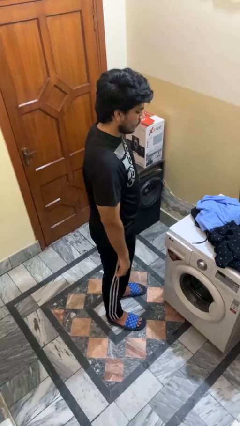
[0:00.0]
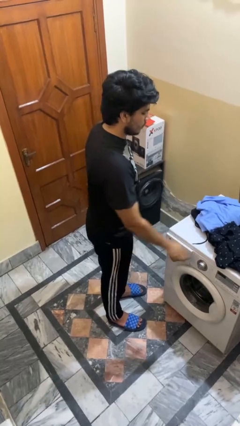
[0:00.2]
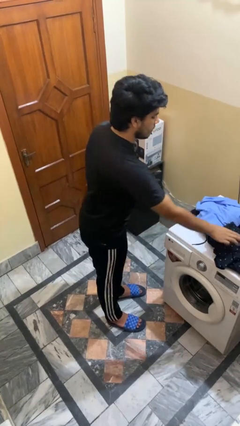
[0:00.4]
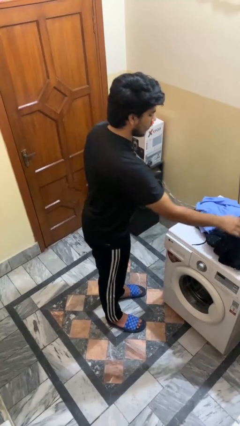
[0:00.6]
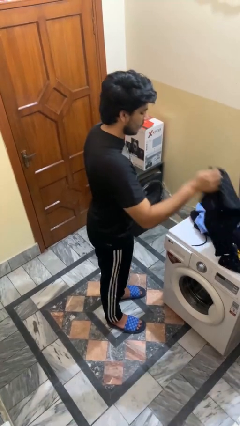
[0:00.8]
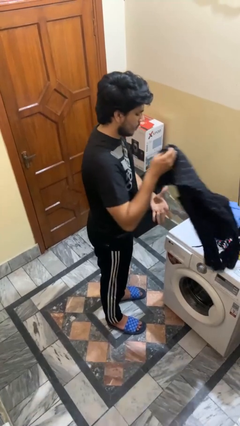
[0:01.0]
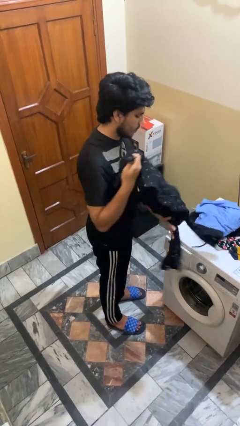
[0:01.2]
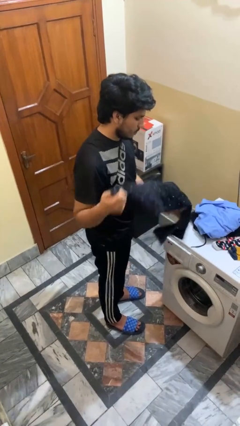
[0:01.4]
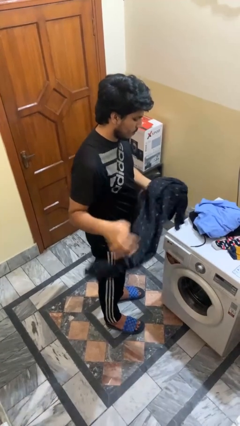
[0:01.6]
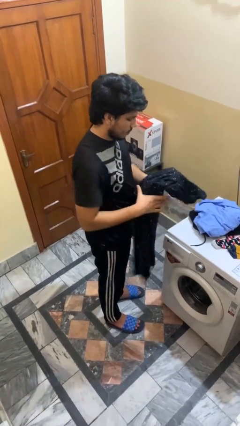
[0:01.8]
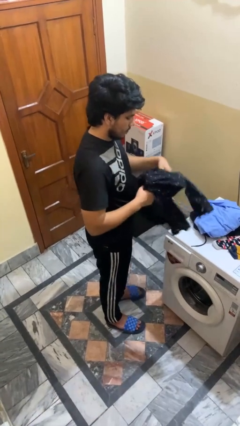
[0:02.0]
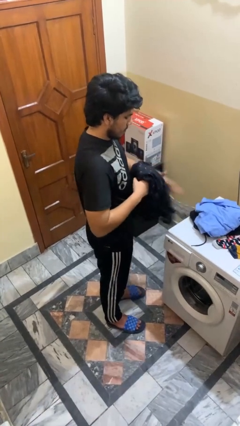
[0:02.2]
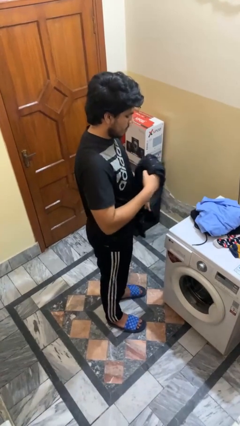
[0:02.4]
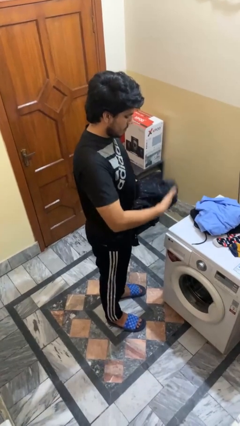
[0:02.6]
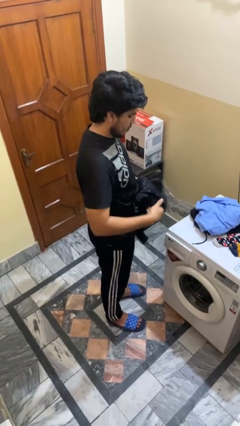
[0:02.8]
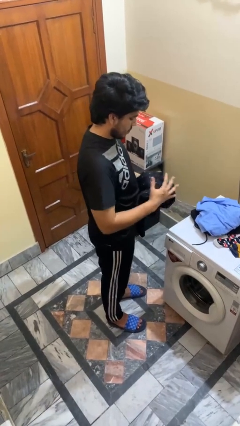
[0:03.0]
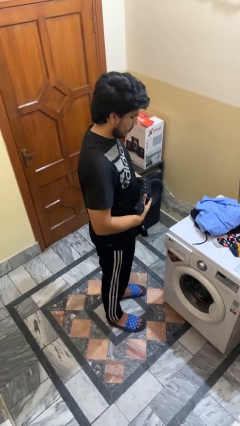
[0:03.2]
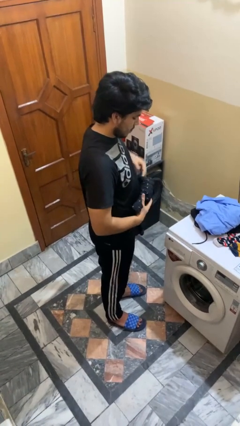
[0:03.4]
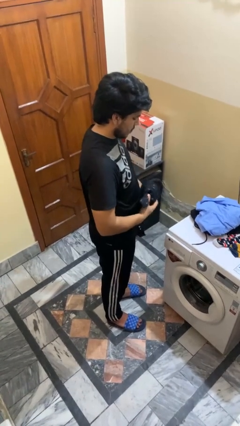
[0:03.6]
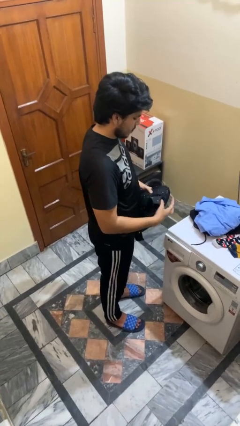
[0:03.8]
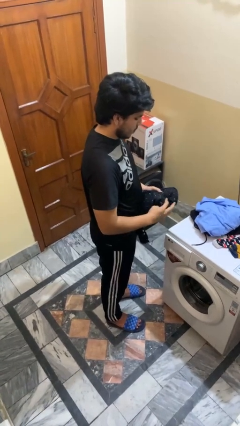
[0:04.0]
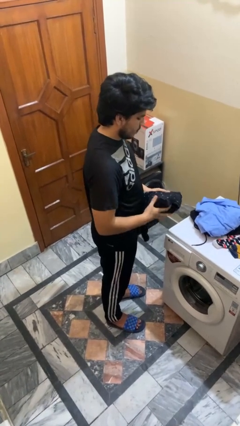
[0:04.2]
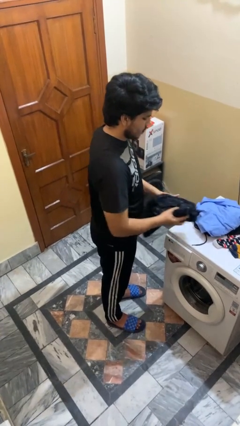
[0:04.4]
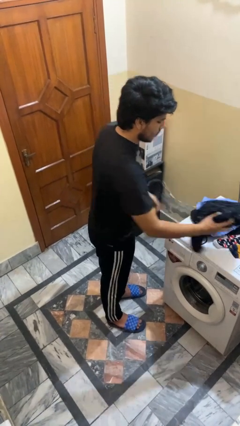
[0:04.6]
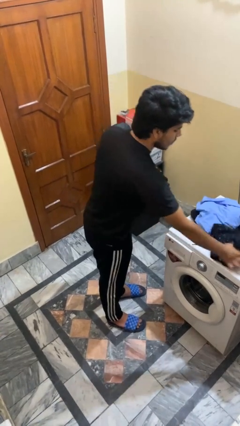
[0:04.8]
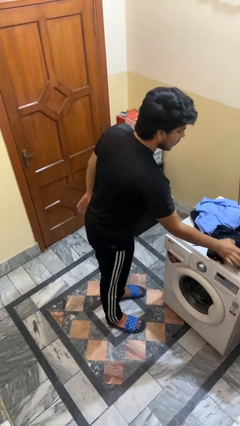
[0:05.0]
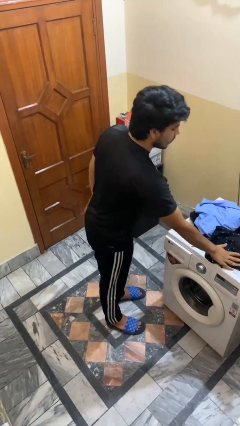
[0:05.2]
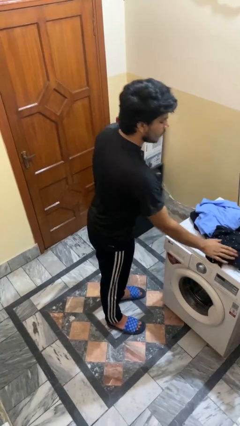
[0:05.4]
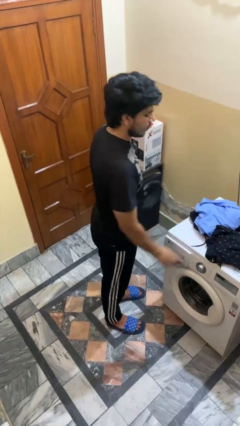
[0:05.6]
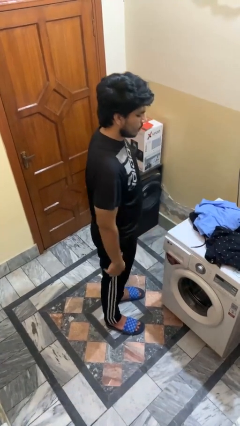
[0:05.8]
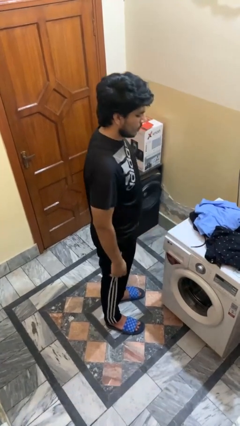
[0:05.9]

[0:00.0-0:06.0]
person folds shirt

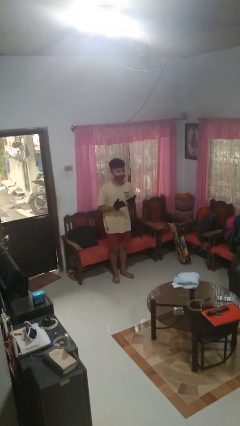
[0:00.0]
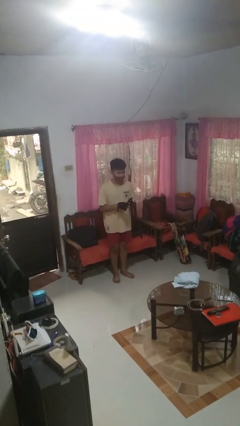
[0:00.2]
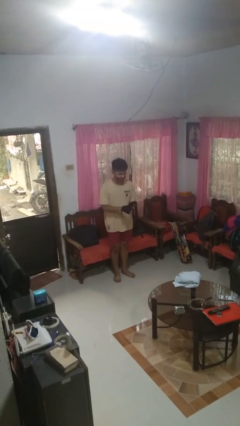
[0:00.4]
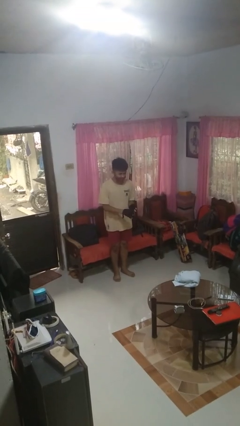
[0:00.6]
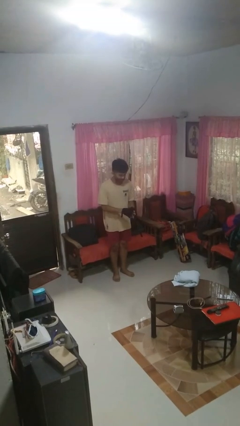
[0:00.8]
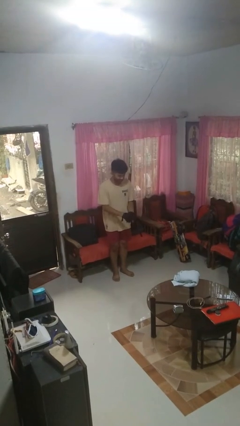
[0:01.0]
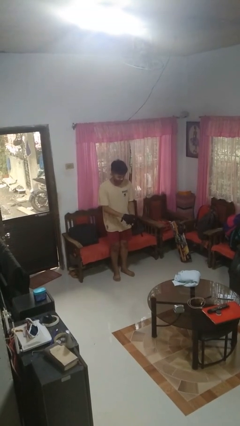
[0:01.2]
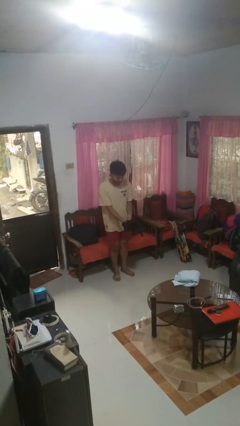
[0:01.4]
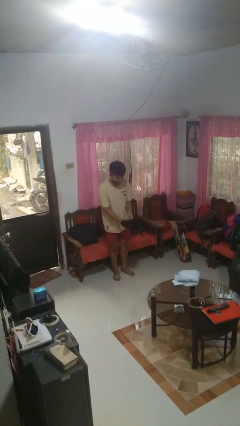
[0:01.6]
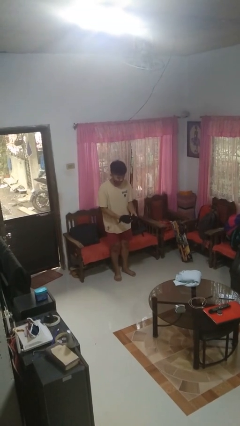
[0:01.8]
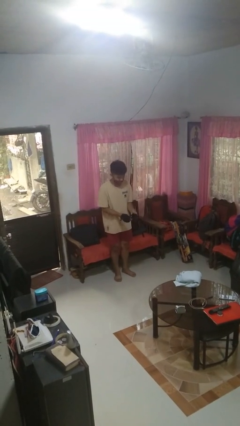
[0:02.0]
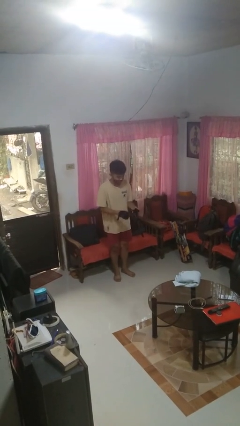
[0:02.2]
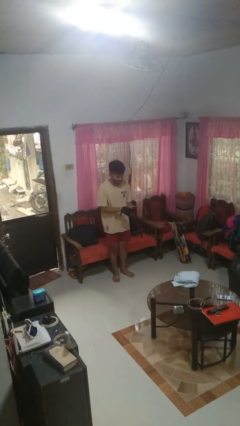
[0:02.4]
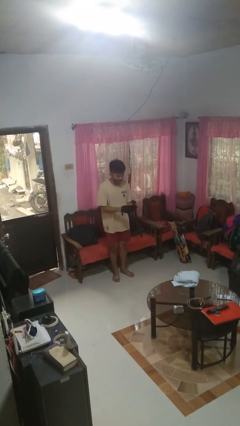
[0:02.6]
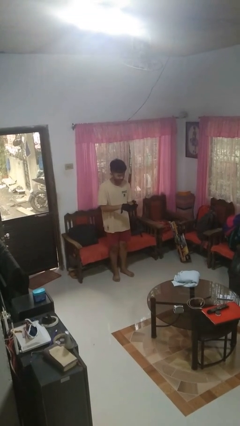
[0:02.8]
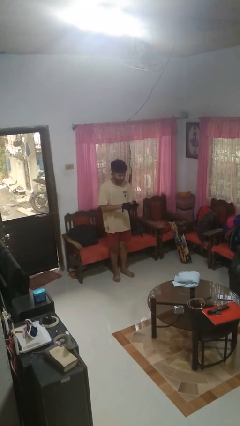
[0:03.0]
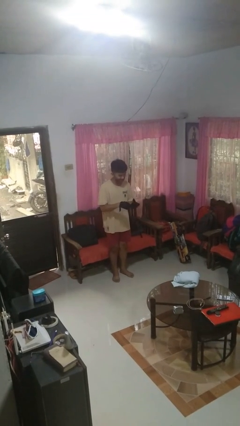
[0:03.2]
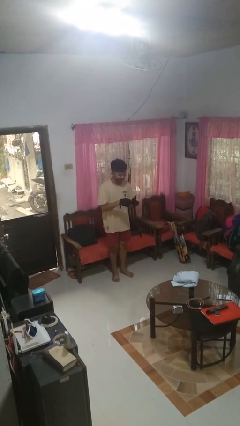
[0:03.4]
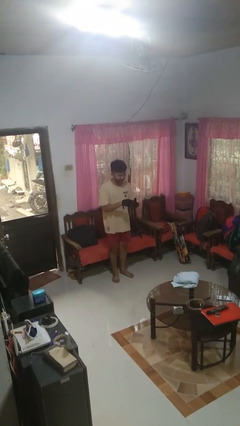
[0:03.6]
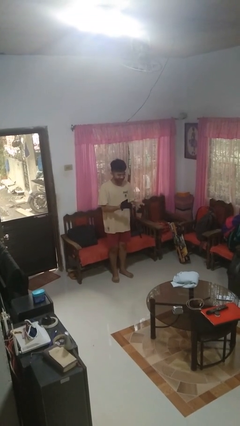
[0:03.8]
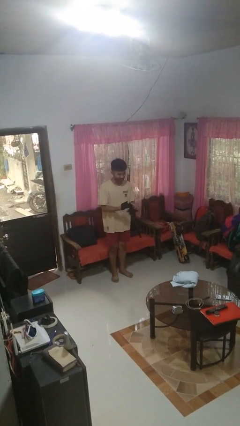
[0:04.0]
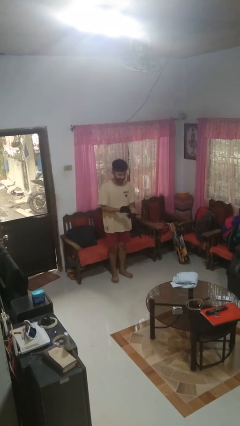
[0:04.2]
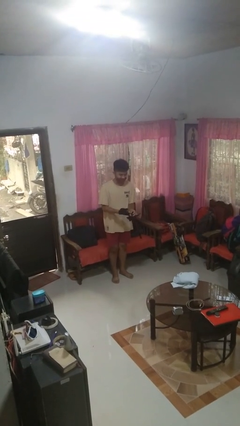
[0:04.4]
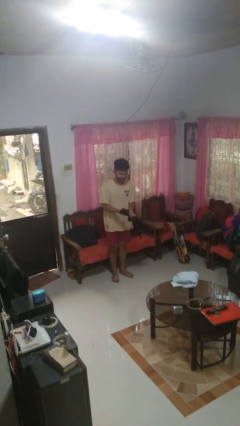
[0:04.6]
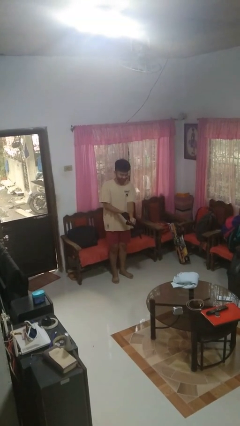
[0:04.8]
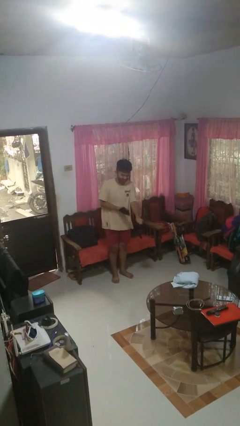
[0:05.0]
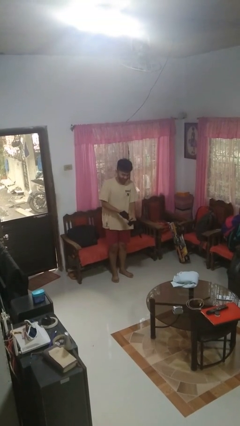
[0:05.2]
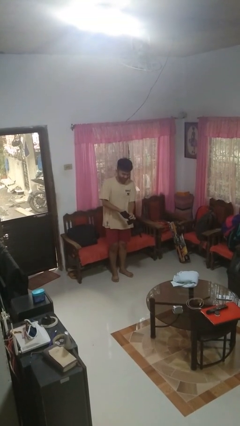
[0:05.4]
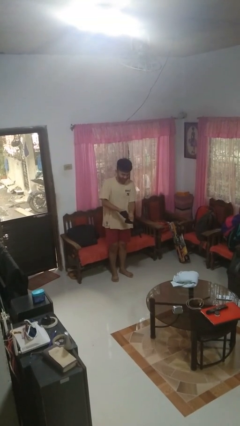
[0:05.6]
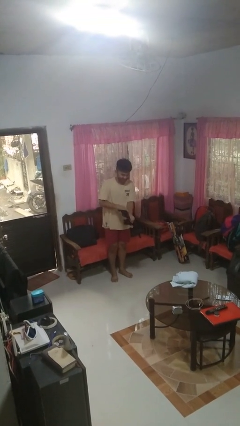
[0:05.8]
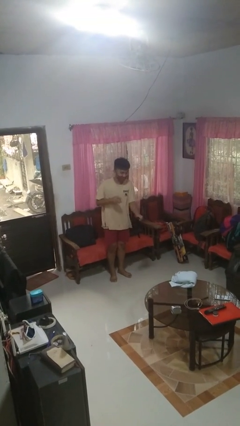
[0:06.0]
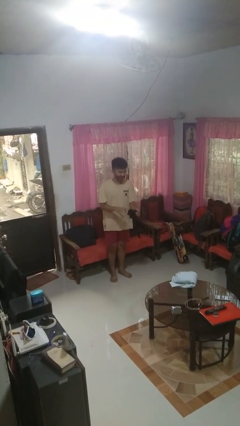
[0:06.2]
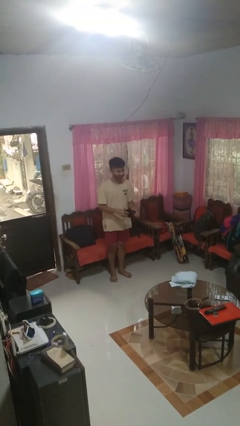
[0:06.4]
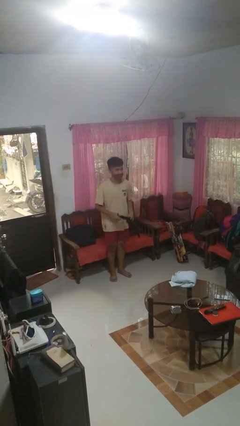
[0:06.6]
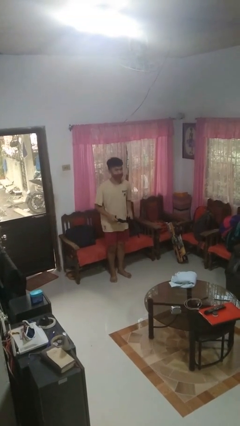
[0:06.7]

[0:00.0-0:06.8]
person takes off gloves

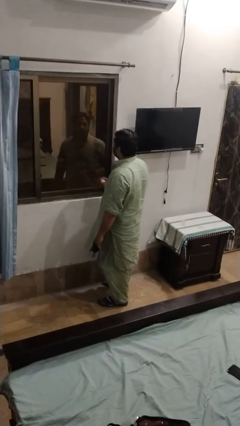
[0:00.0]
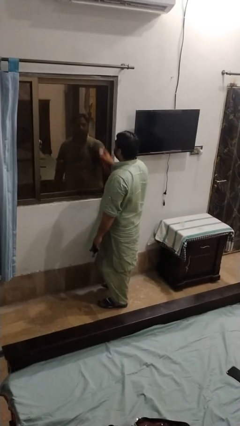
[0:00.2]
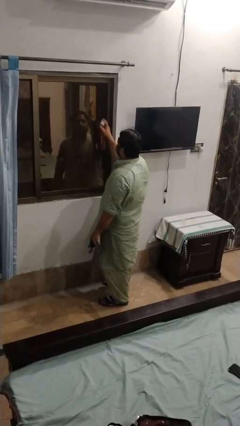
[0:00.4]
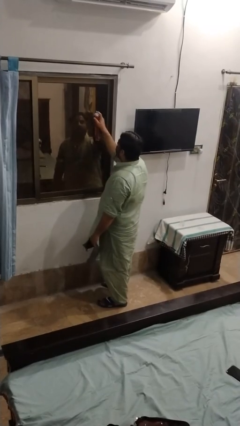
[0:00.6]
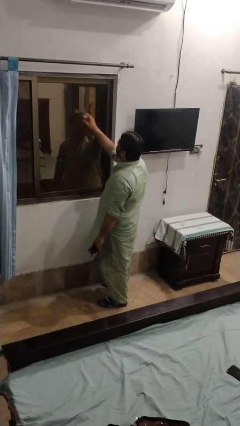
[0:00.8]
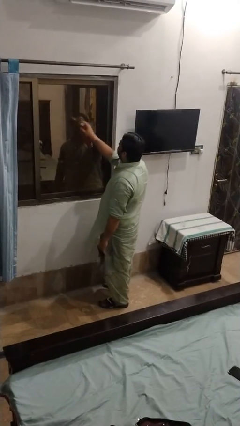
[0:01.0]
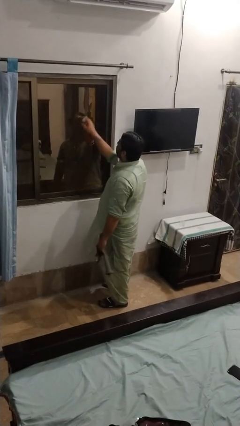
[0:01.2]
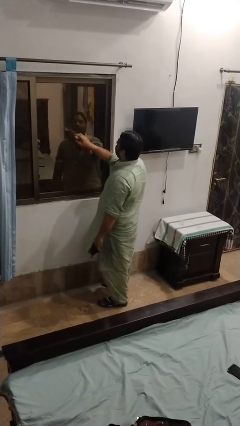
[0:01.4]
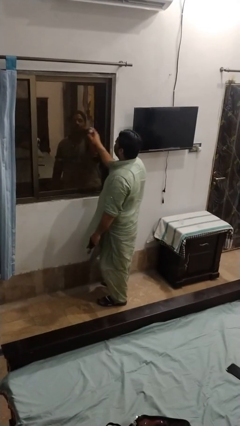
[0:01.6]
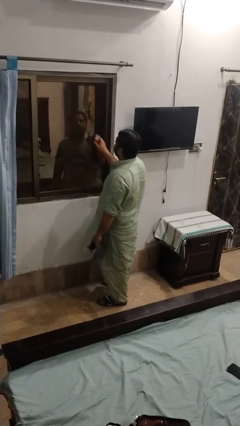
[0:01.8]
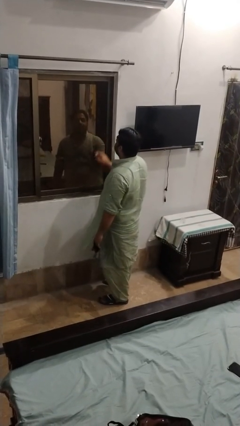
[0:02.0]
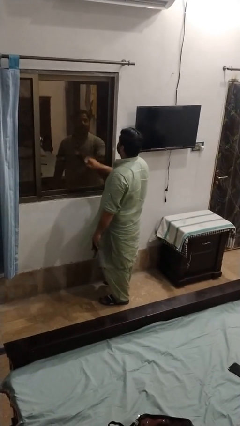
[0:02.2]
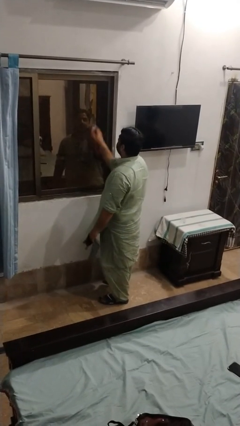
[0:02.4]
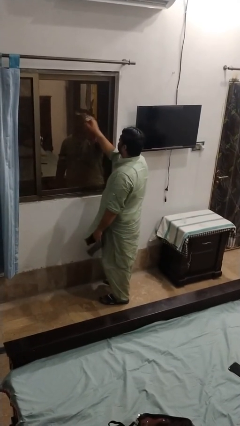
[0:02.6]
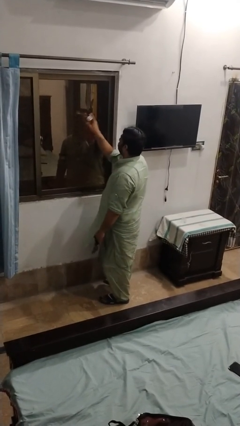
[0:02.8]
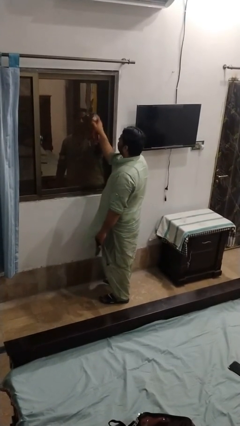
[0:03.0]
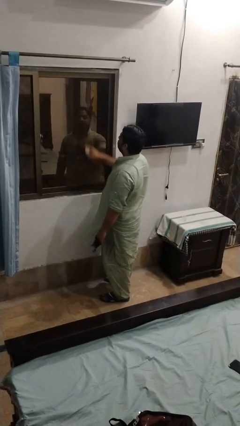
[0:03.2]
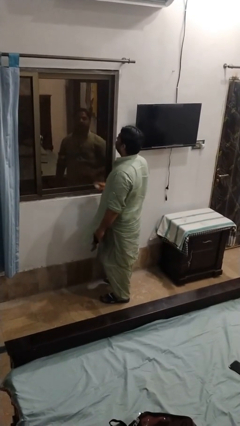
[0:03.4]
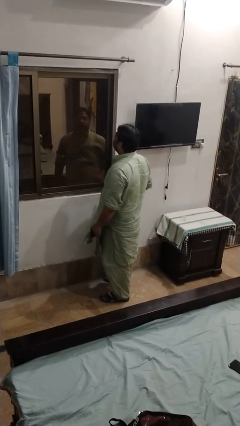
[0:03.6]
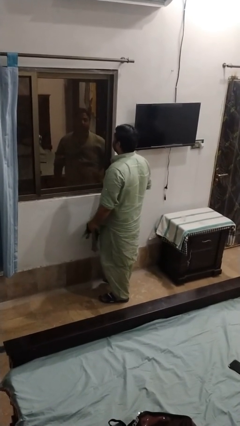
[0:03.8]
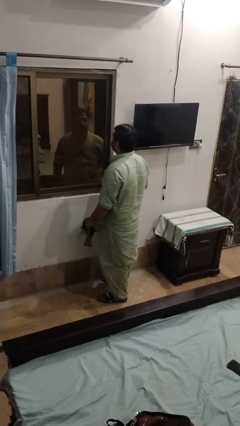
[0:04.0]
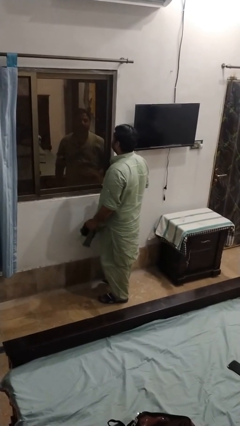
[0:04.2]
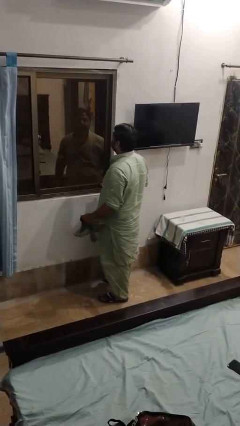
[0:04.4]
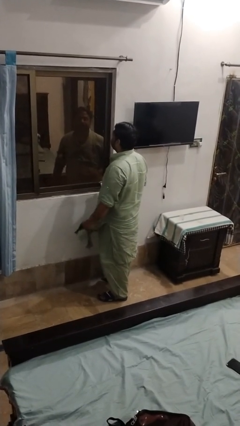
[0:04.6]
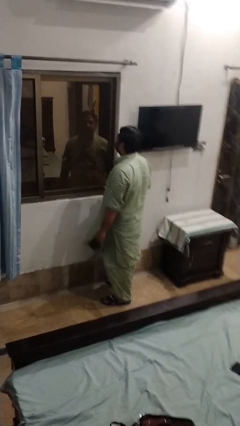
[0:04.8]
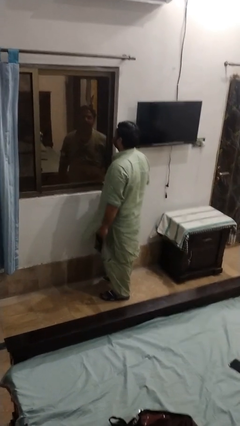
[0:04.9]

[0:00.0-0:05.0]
person sprays from bottle
